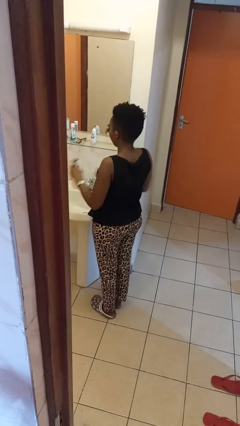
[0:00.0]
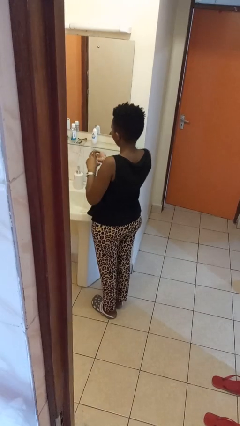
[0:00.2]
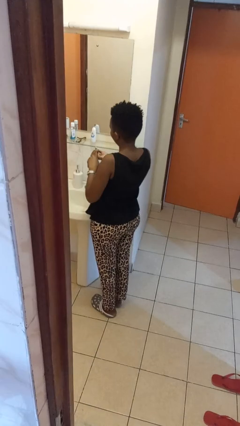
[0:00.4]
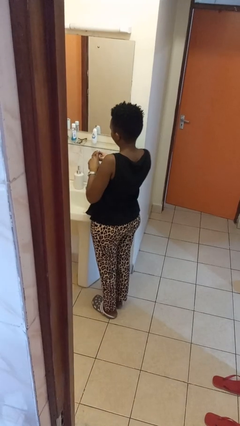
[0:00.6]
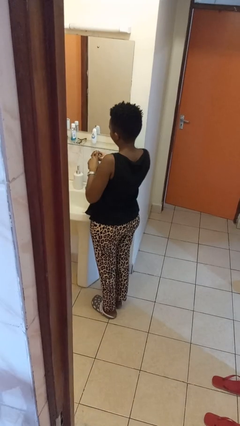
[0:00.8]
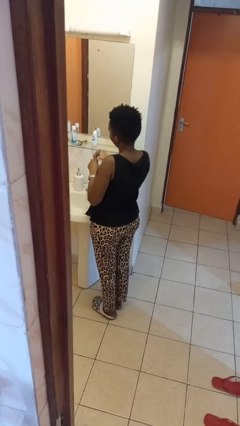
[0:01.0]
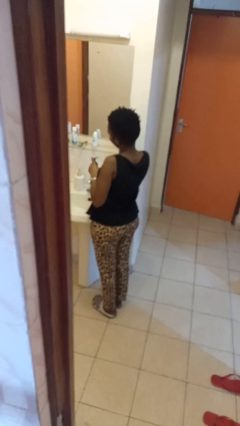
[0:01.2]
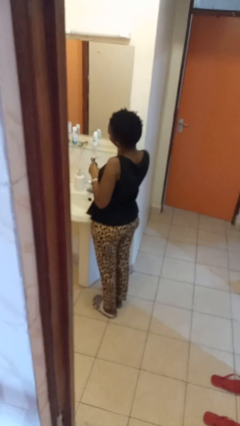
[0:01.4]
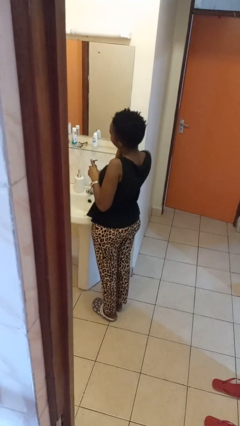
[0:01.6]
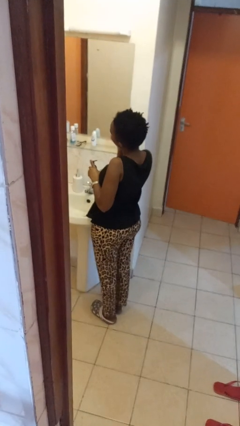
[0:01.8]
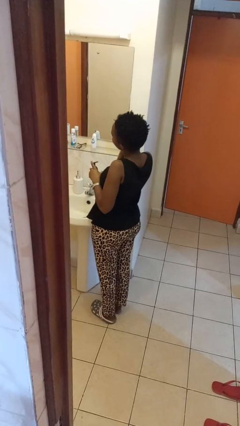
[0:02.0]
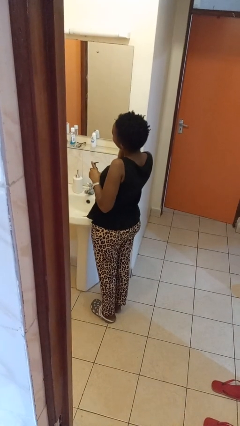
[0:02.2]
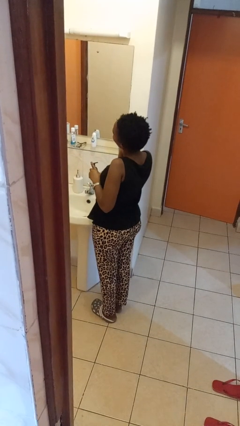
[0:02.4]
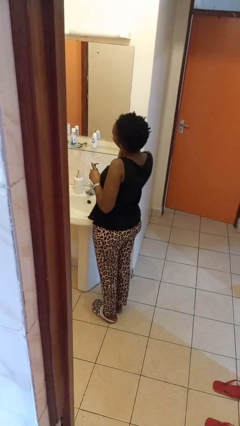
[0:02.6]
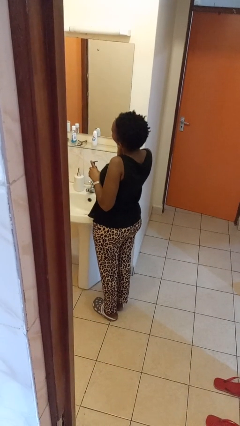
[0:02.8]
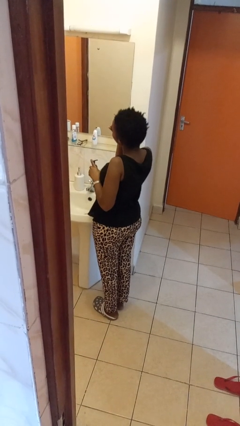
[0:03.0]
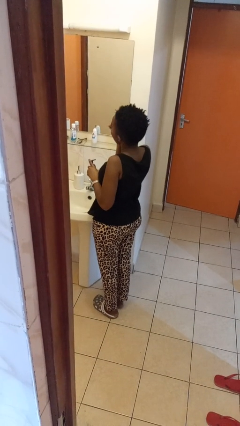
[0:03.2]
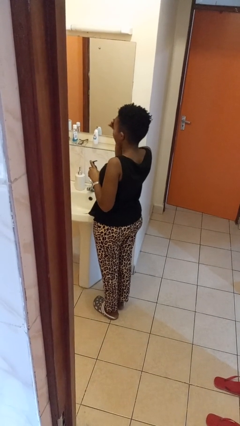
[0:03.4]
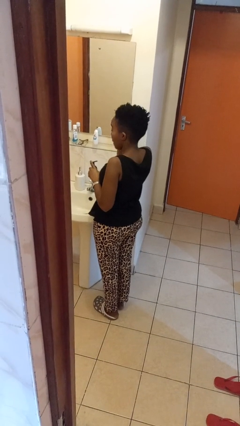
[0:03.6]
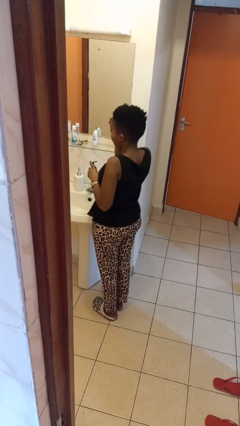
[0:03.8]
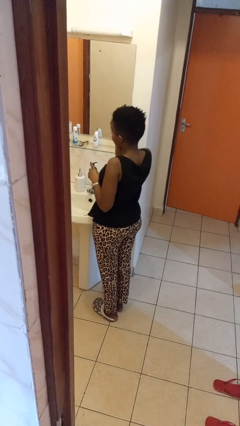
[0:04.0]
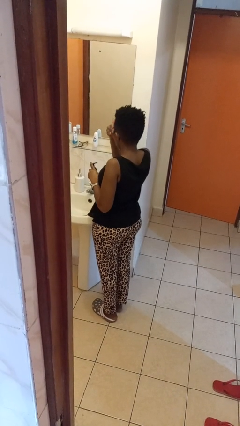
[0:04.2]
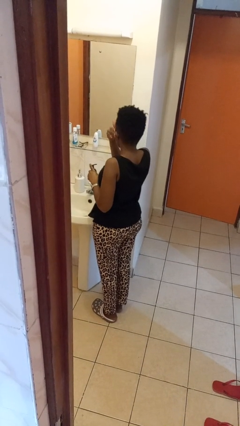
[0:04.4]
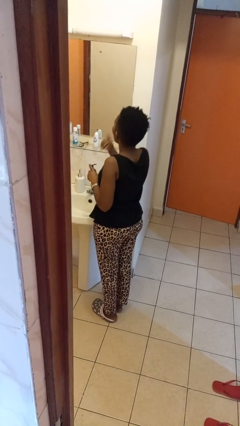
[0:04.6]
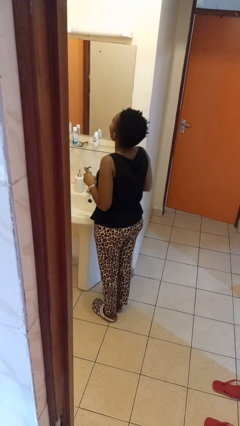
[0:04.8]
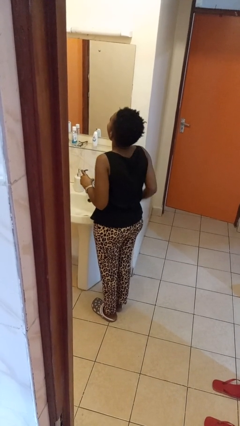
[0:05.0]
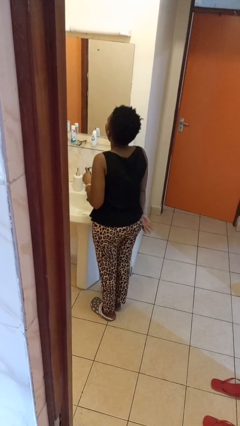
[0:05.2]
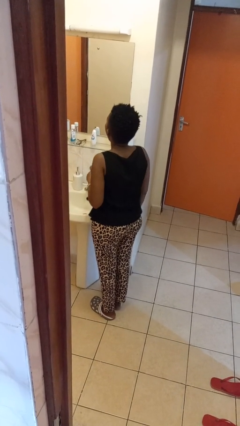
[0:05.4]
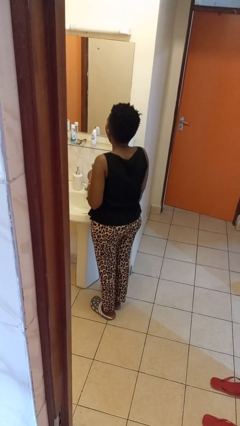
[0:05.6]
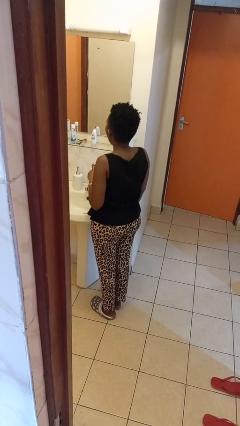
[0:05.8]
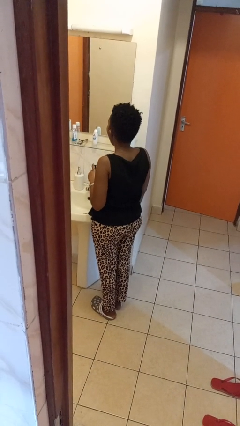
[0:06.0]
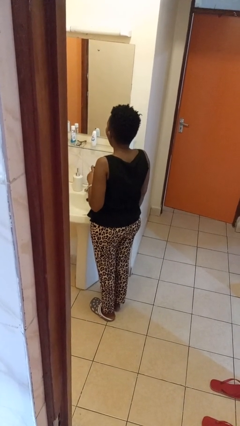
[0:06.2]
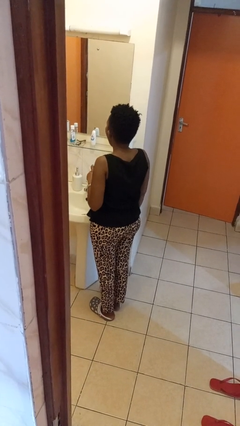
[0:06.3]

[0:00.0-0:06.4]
person applies facial moisturizer

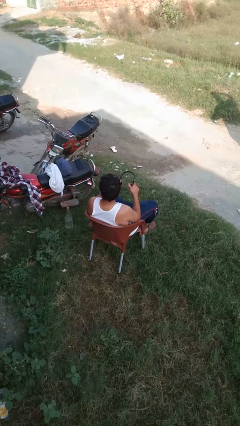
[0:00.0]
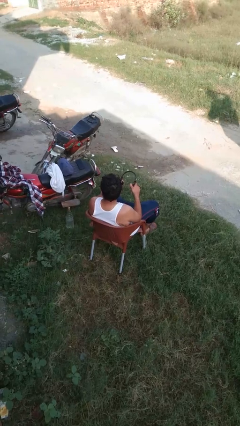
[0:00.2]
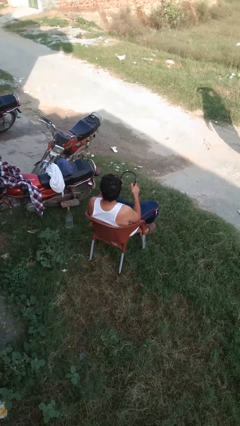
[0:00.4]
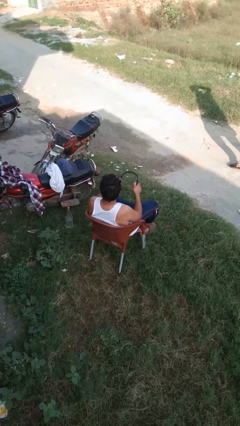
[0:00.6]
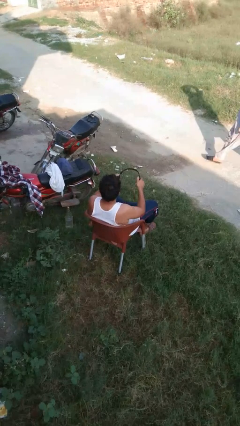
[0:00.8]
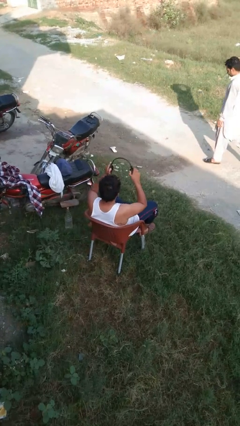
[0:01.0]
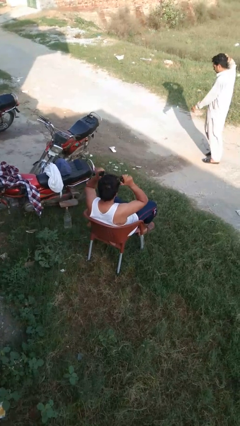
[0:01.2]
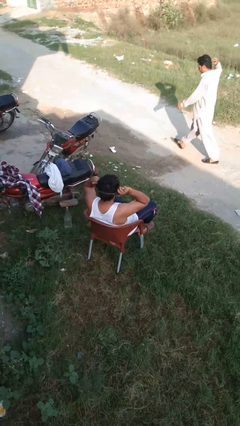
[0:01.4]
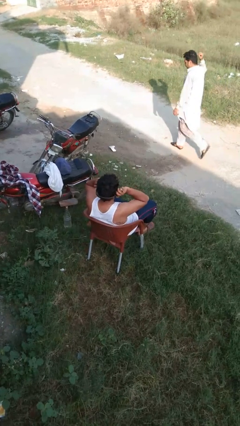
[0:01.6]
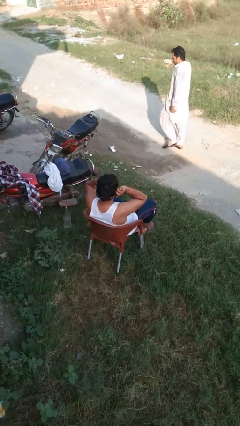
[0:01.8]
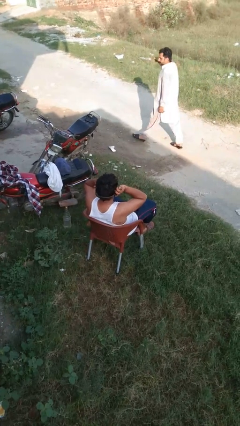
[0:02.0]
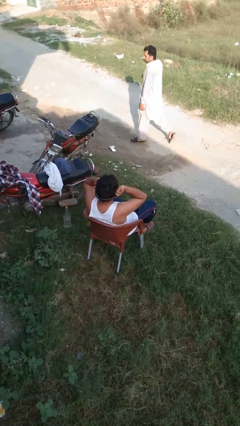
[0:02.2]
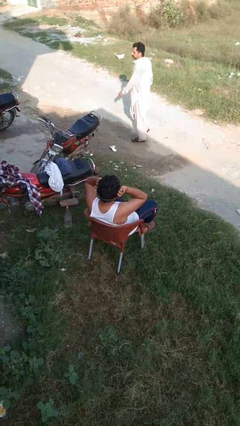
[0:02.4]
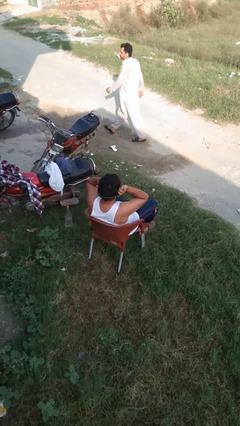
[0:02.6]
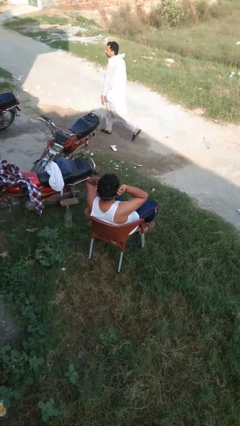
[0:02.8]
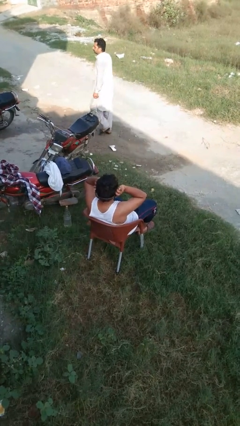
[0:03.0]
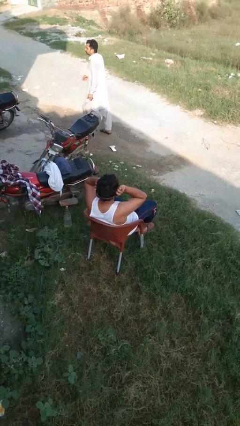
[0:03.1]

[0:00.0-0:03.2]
person puts on headphones

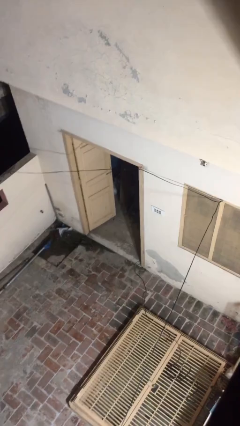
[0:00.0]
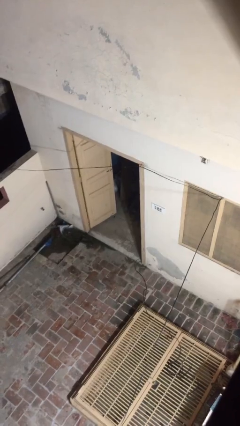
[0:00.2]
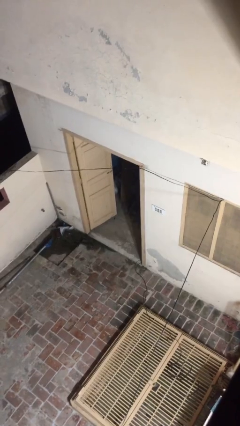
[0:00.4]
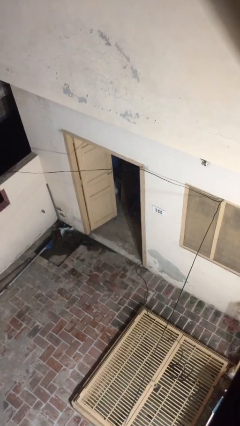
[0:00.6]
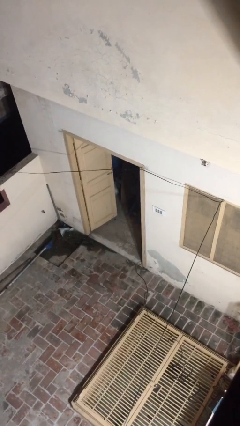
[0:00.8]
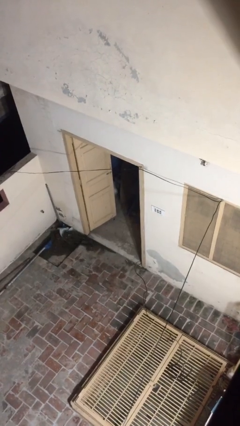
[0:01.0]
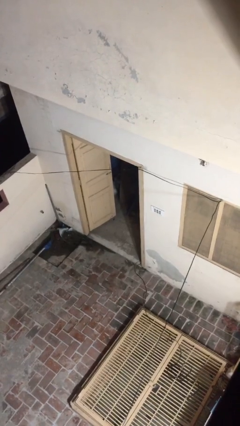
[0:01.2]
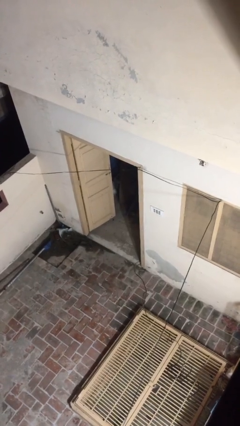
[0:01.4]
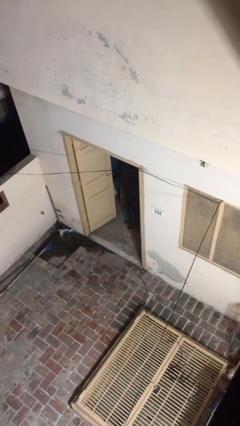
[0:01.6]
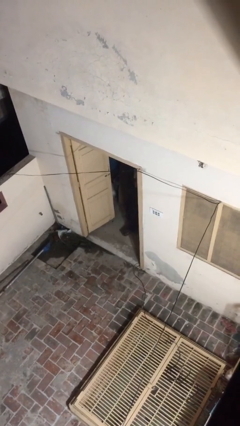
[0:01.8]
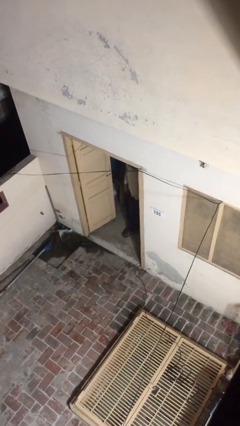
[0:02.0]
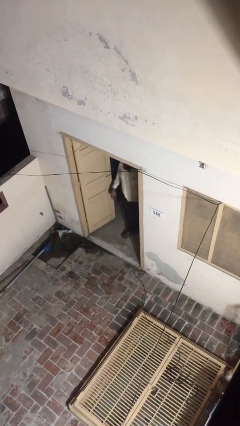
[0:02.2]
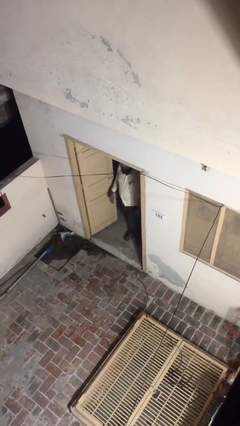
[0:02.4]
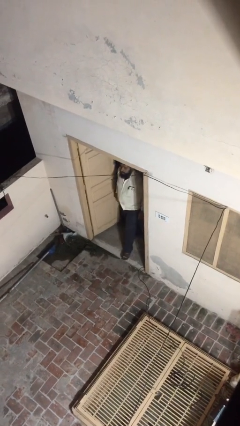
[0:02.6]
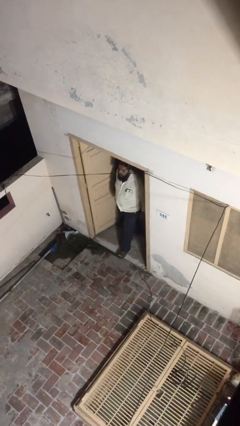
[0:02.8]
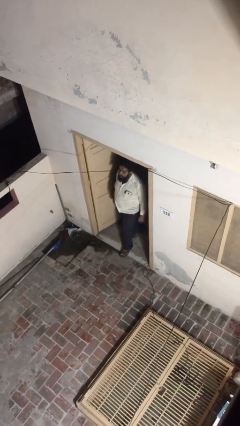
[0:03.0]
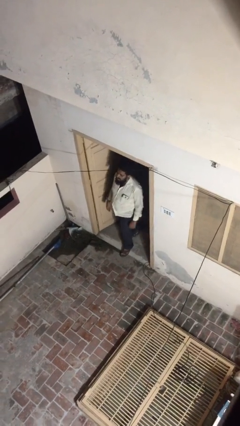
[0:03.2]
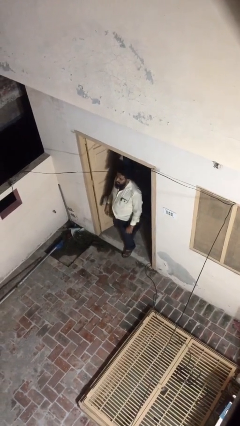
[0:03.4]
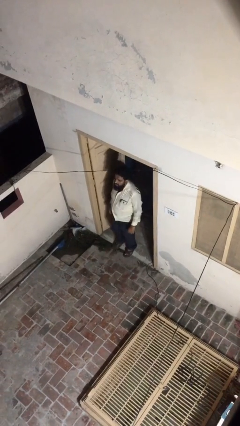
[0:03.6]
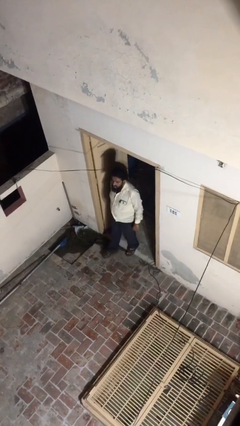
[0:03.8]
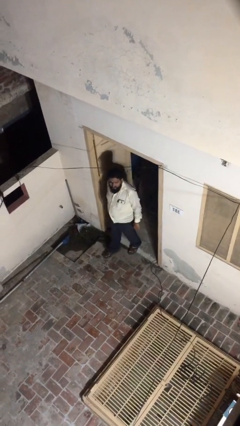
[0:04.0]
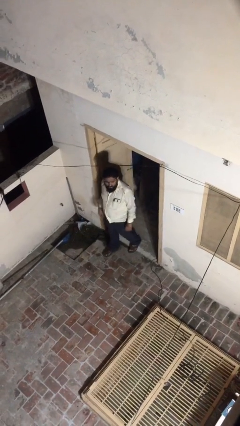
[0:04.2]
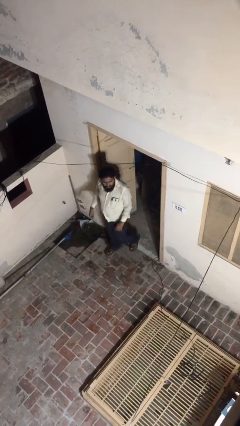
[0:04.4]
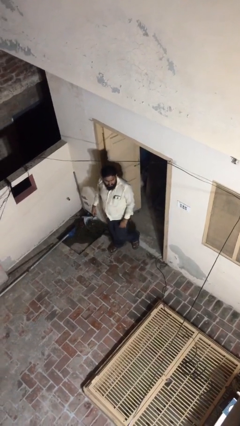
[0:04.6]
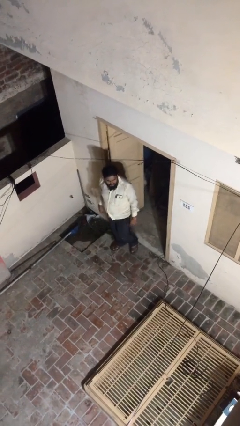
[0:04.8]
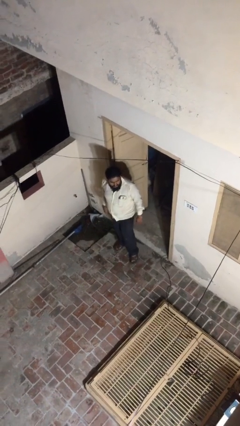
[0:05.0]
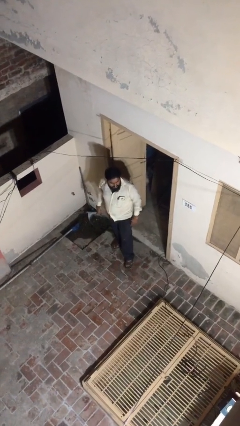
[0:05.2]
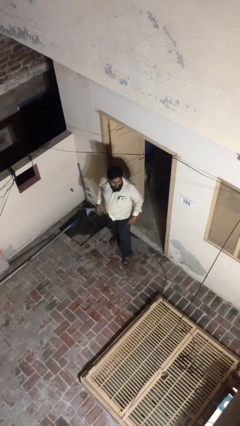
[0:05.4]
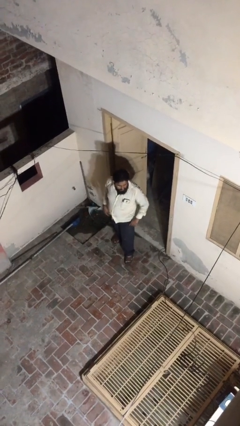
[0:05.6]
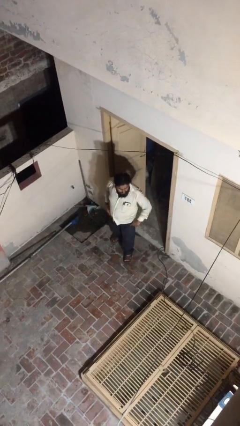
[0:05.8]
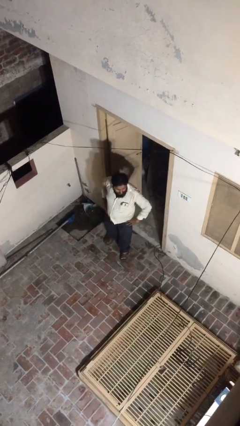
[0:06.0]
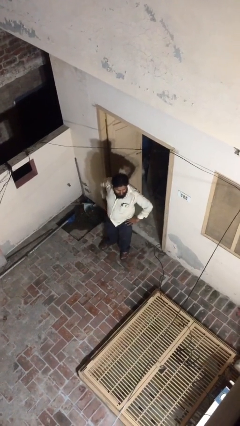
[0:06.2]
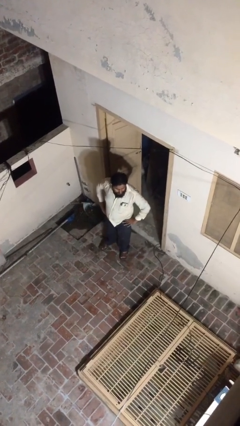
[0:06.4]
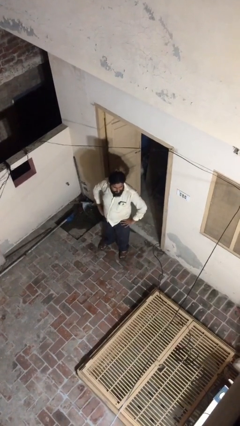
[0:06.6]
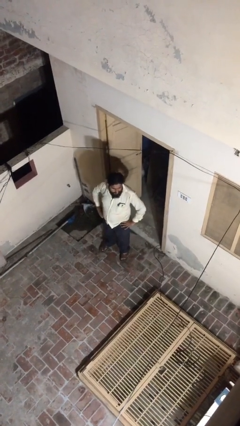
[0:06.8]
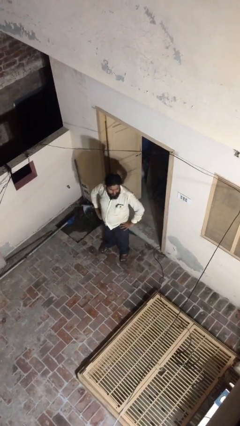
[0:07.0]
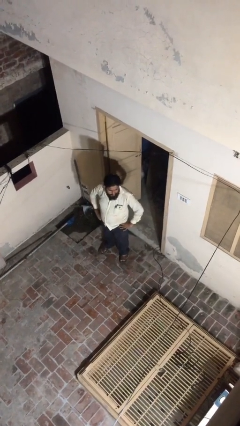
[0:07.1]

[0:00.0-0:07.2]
person enters scene through structure

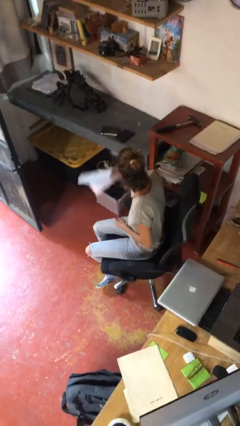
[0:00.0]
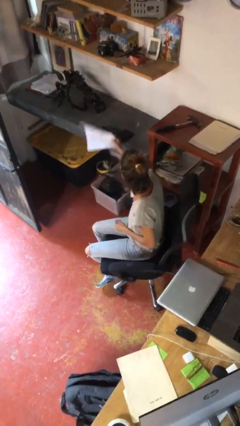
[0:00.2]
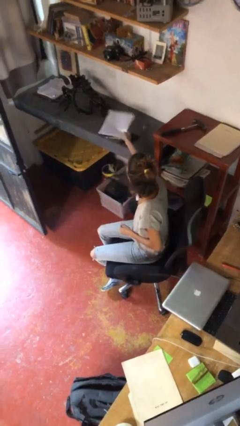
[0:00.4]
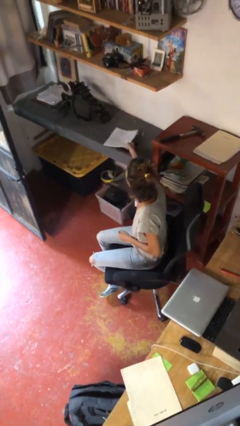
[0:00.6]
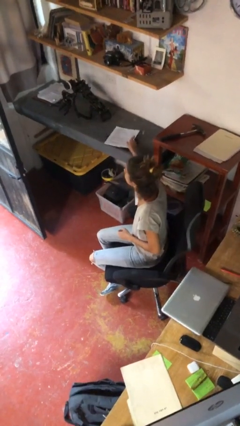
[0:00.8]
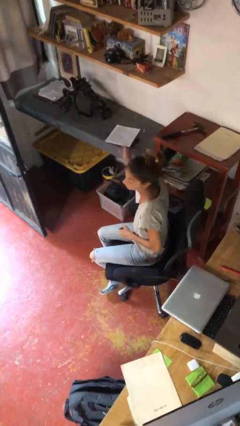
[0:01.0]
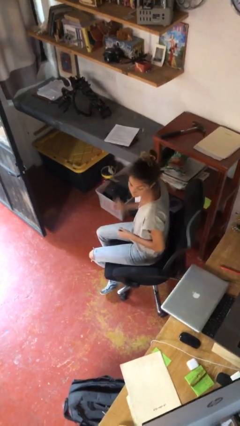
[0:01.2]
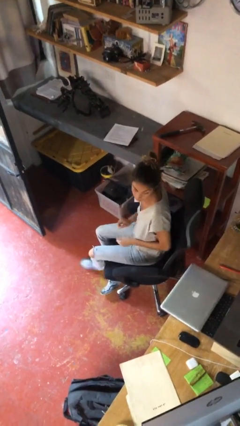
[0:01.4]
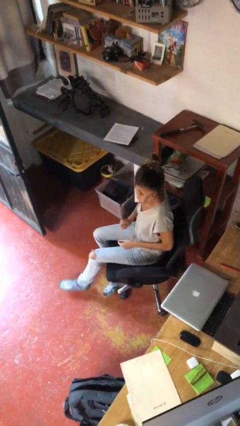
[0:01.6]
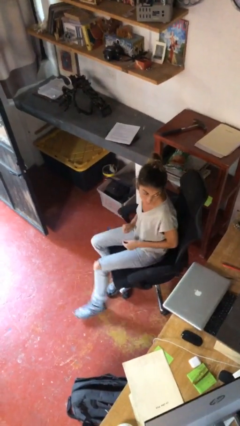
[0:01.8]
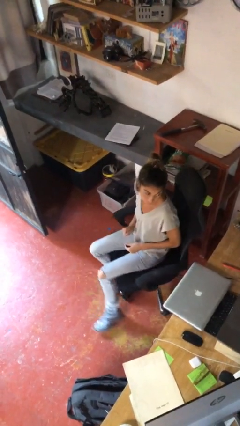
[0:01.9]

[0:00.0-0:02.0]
person puts down object on table
